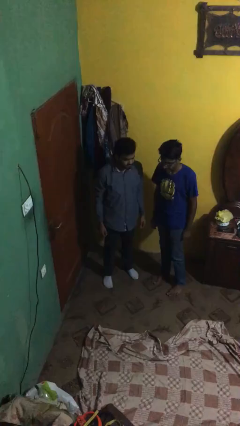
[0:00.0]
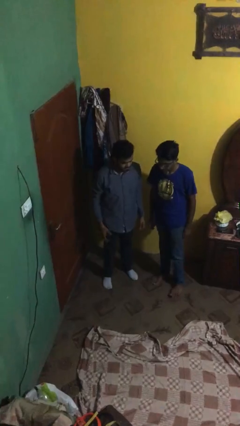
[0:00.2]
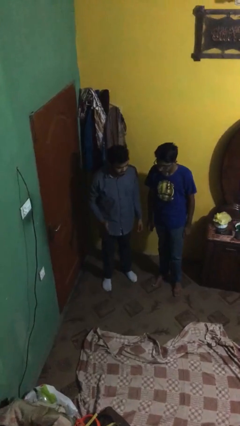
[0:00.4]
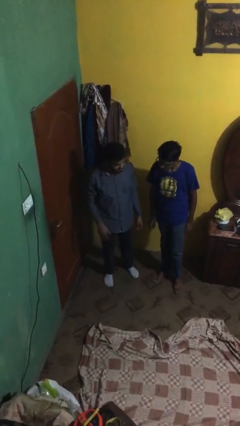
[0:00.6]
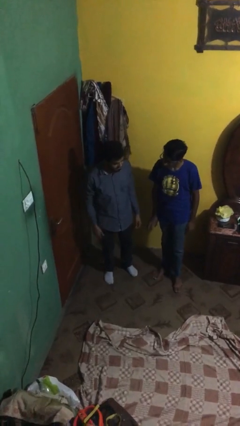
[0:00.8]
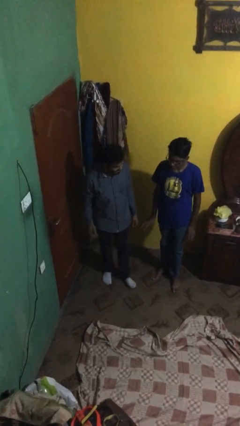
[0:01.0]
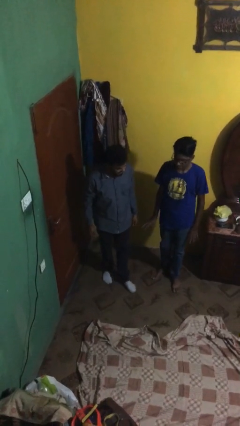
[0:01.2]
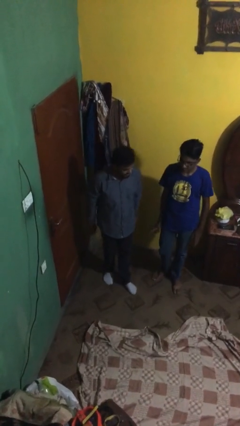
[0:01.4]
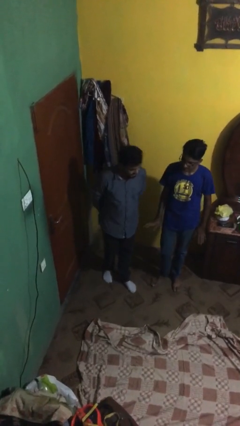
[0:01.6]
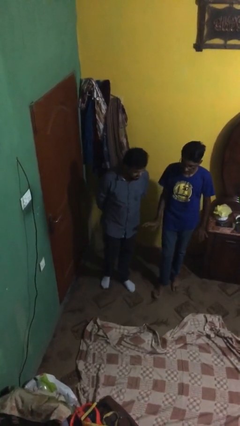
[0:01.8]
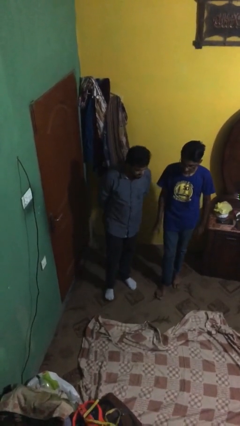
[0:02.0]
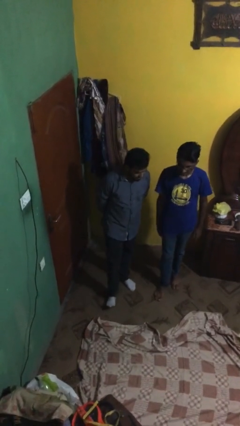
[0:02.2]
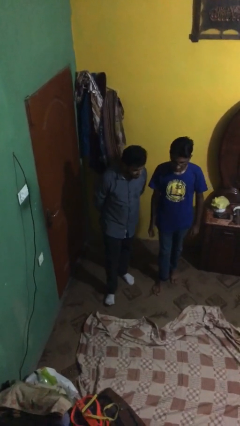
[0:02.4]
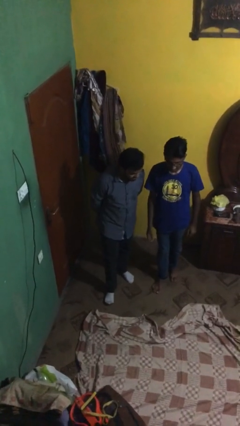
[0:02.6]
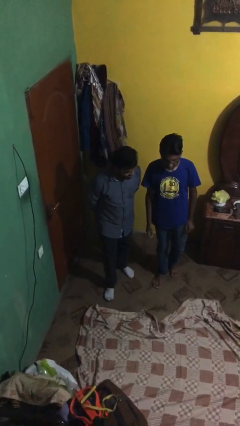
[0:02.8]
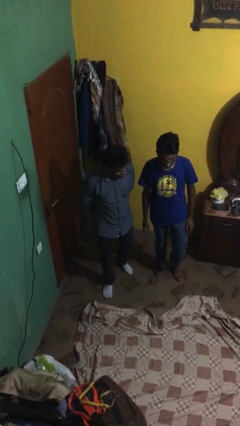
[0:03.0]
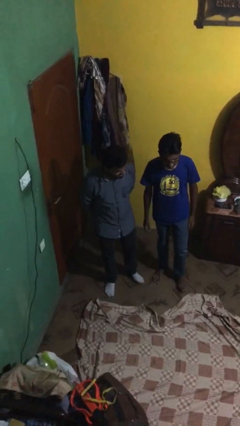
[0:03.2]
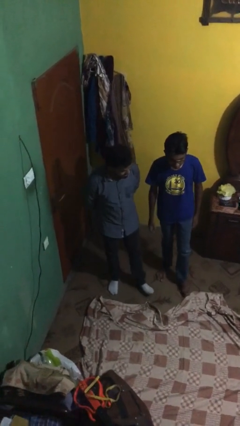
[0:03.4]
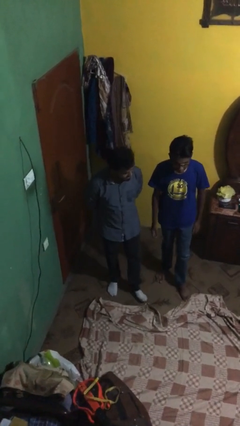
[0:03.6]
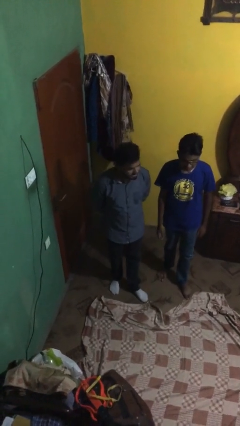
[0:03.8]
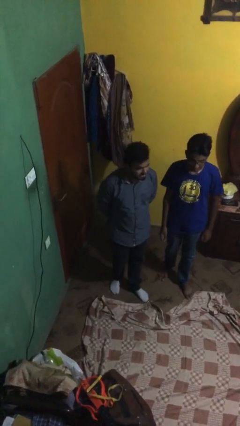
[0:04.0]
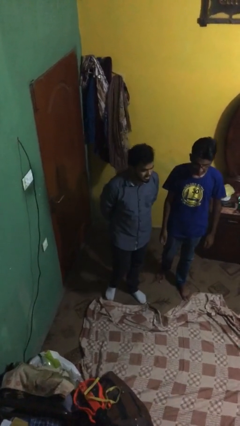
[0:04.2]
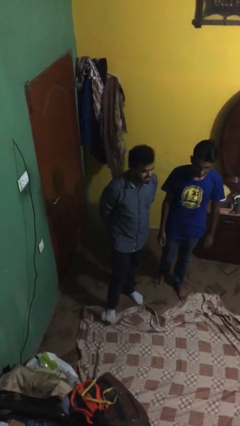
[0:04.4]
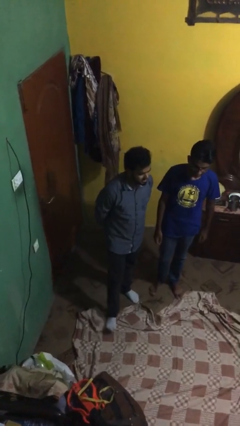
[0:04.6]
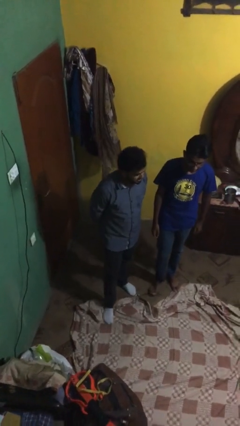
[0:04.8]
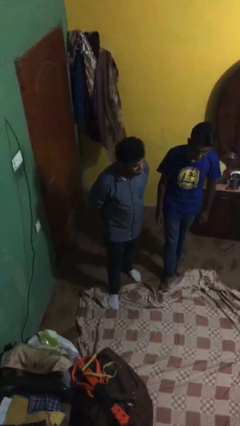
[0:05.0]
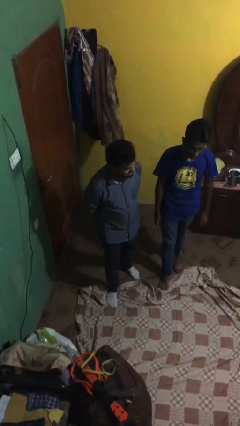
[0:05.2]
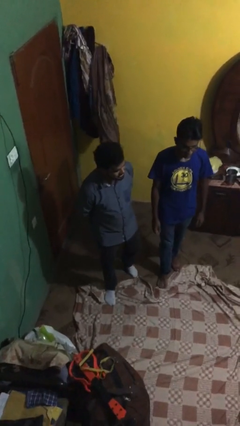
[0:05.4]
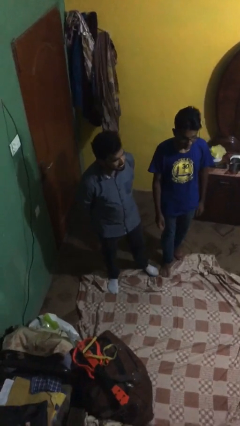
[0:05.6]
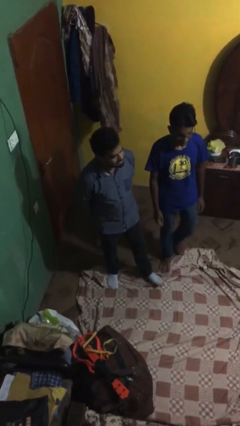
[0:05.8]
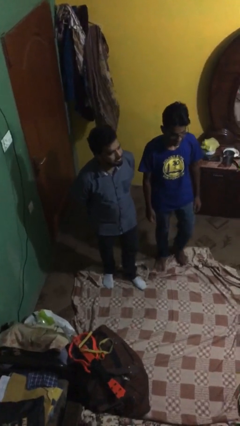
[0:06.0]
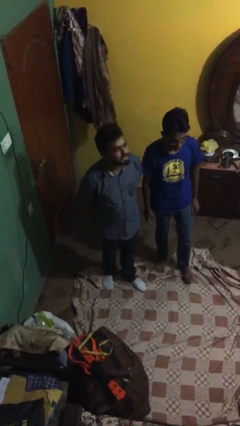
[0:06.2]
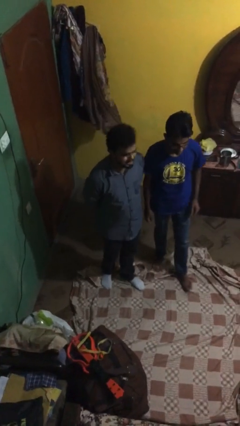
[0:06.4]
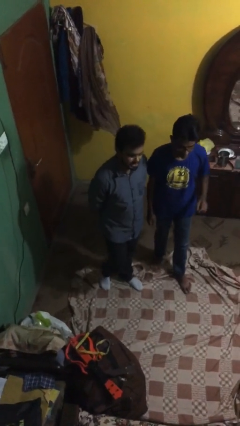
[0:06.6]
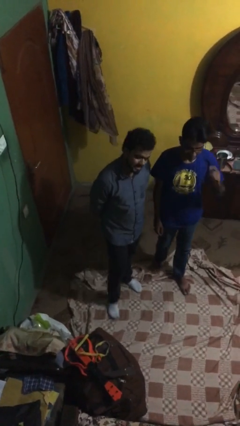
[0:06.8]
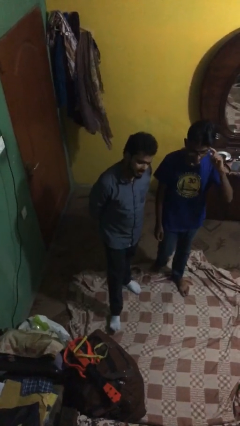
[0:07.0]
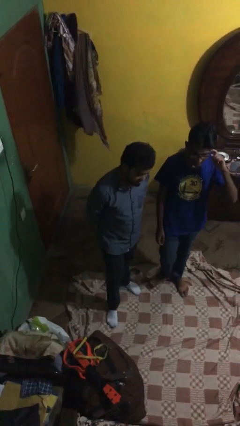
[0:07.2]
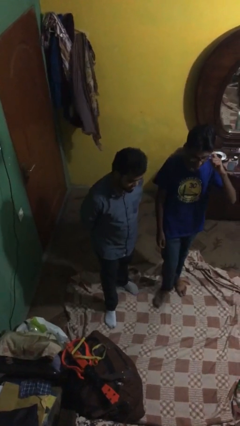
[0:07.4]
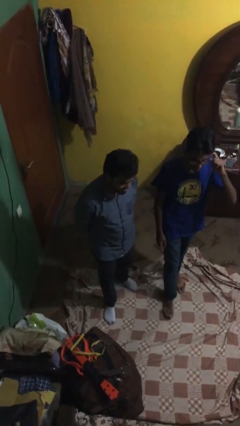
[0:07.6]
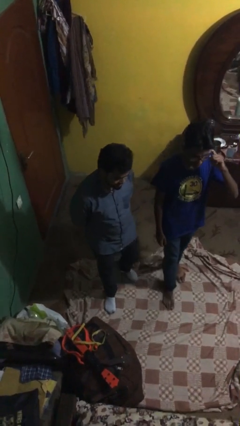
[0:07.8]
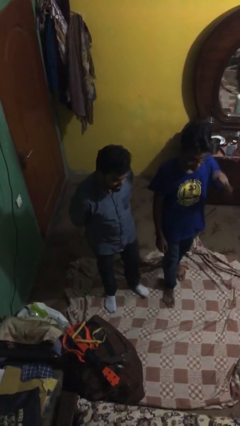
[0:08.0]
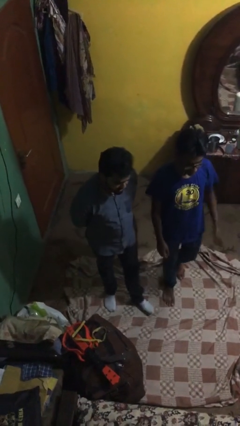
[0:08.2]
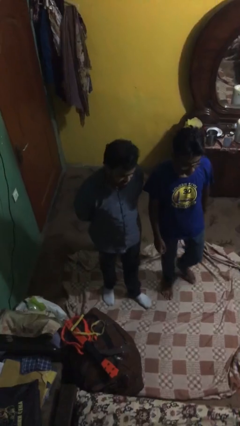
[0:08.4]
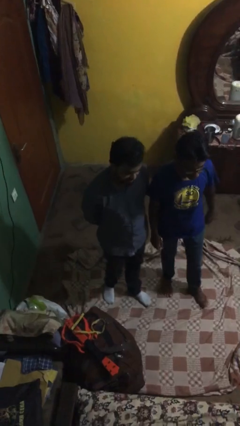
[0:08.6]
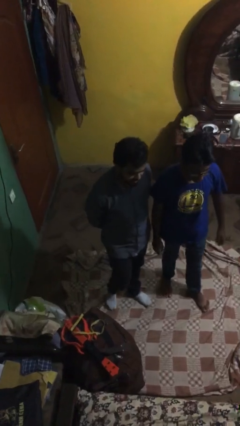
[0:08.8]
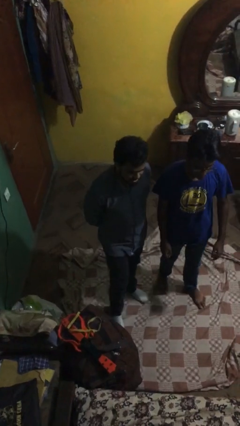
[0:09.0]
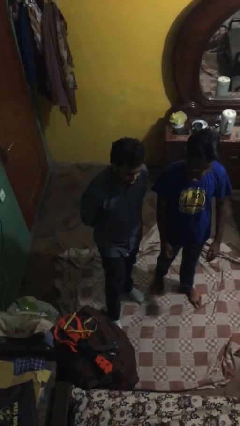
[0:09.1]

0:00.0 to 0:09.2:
person talks to person

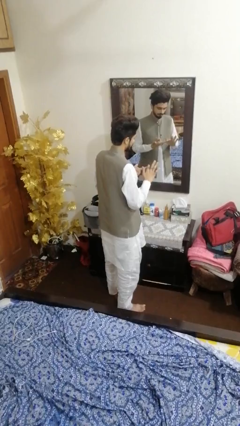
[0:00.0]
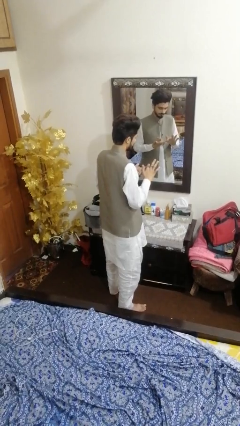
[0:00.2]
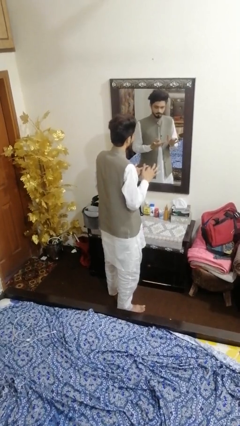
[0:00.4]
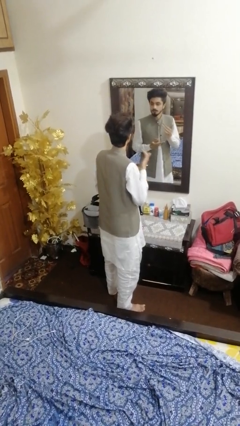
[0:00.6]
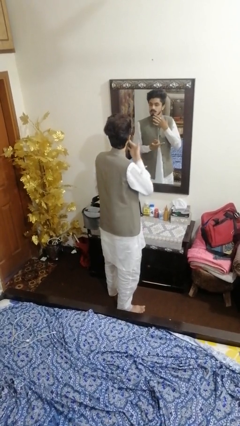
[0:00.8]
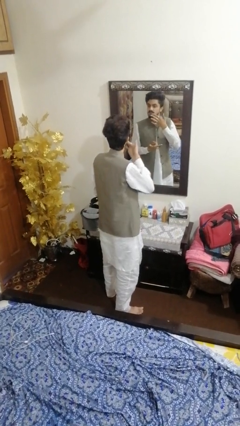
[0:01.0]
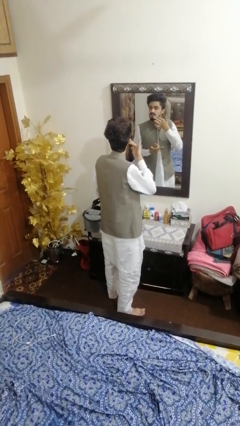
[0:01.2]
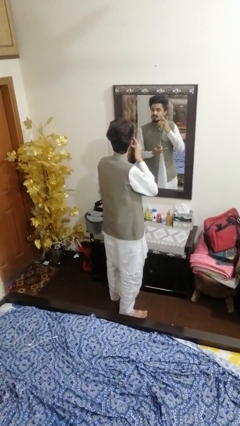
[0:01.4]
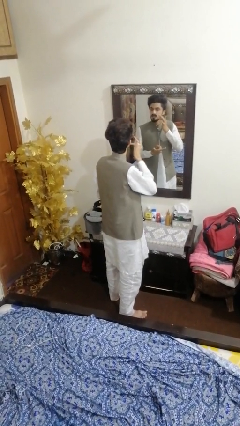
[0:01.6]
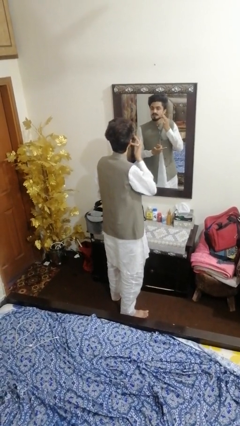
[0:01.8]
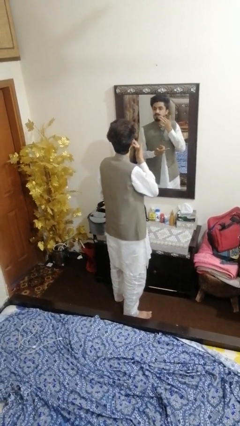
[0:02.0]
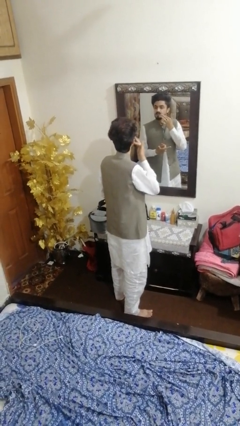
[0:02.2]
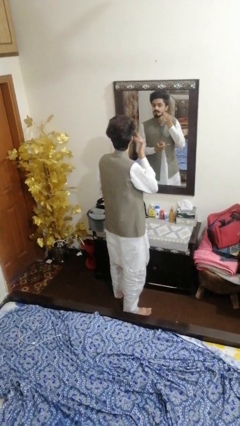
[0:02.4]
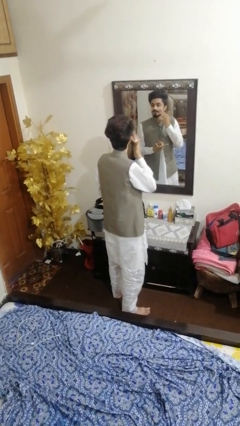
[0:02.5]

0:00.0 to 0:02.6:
person applies foundation makeup

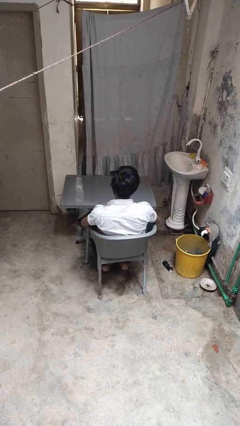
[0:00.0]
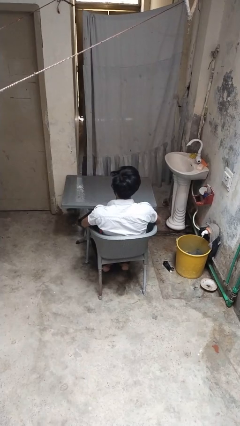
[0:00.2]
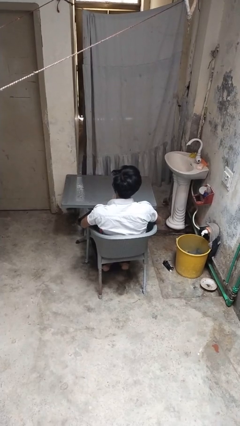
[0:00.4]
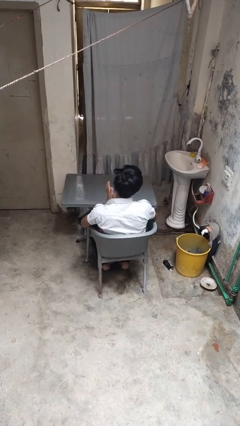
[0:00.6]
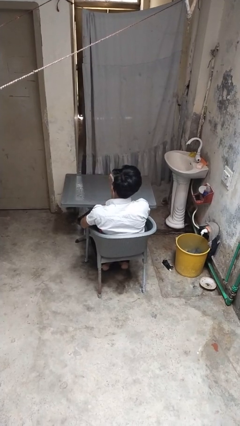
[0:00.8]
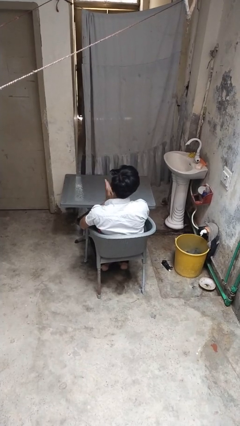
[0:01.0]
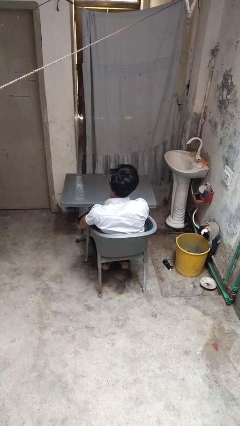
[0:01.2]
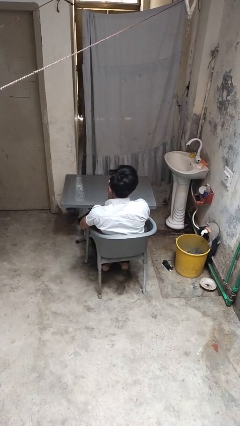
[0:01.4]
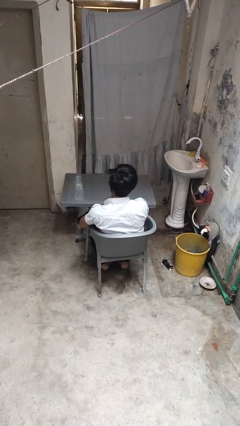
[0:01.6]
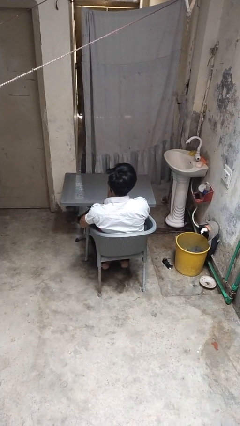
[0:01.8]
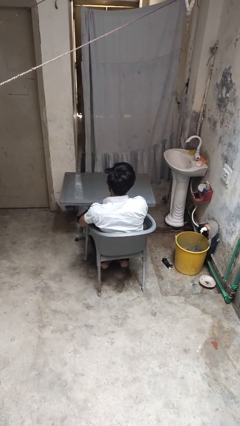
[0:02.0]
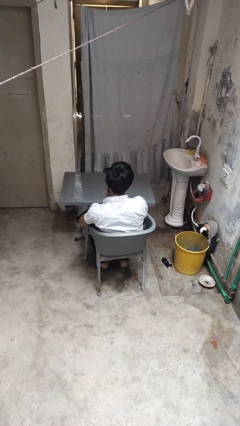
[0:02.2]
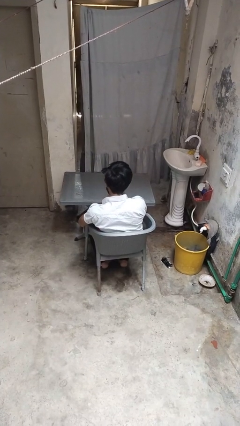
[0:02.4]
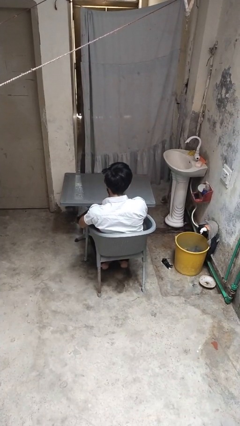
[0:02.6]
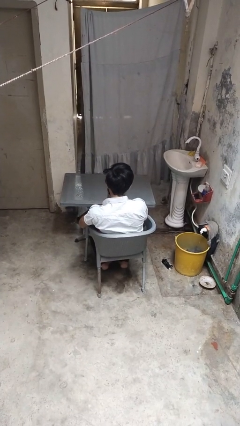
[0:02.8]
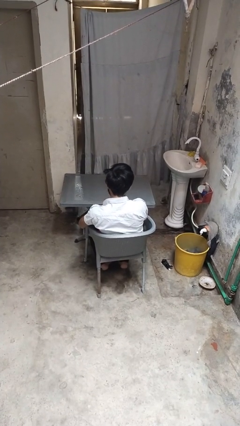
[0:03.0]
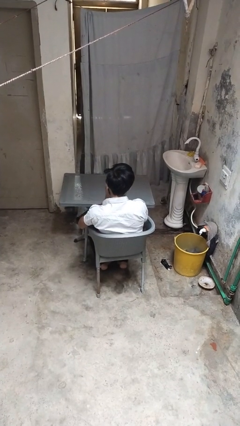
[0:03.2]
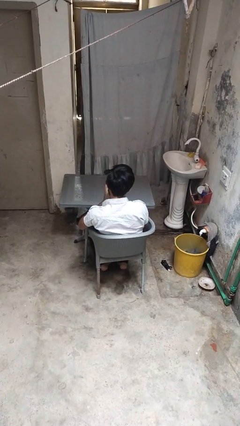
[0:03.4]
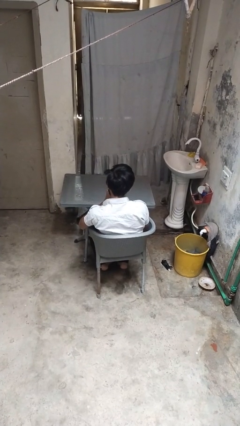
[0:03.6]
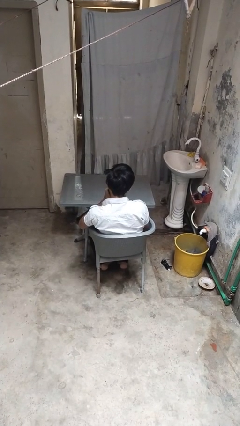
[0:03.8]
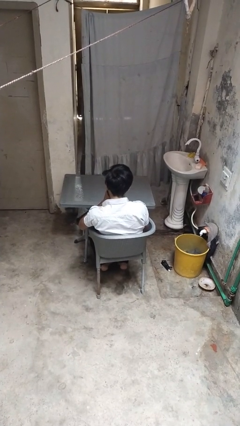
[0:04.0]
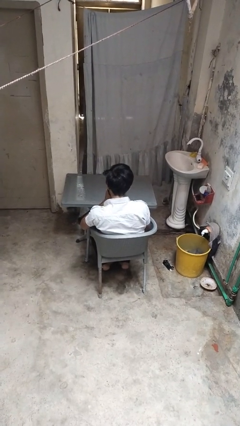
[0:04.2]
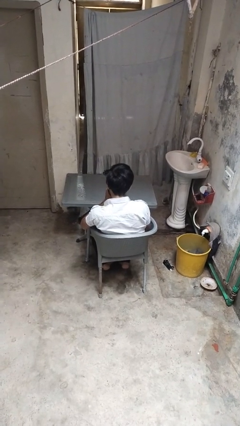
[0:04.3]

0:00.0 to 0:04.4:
person blows into hands

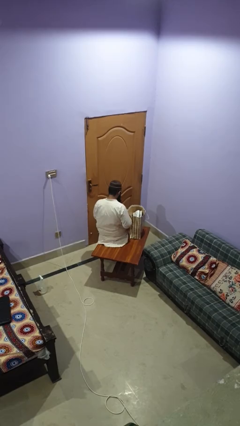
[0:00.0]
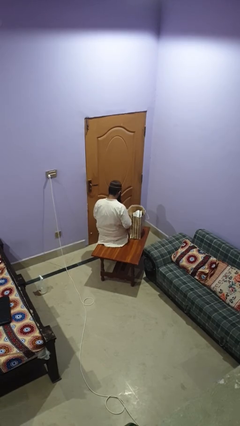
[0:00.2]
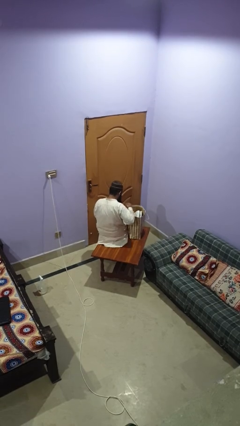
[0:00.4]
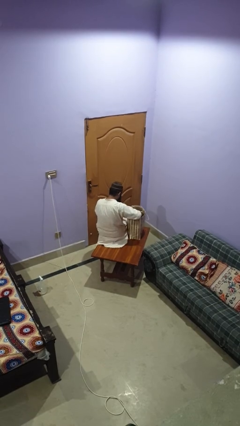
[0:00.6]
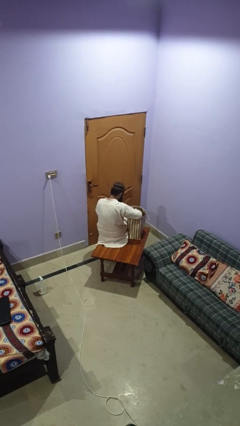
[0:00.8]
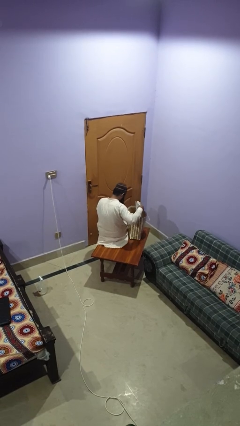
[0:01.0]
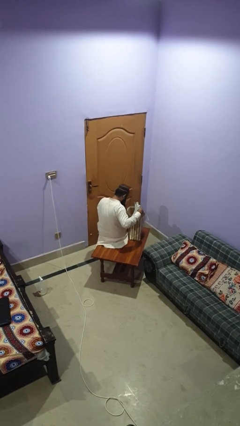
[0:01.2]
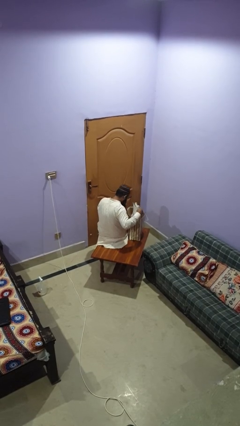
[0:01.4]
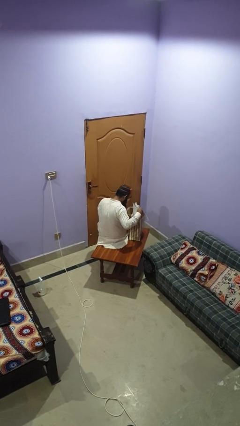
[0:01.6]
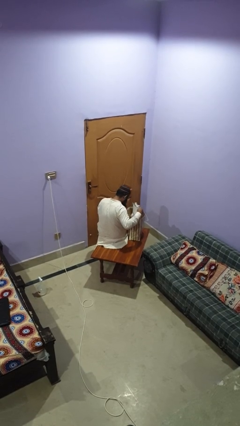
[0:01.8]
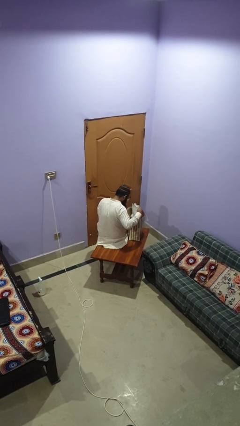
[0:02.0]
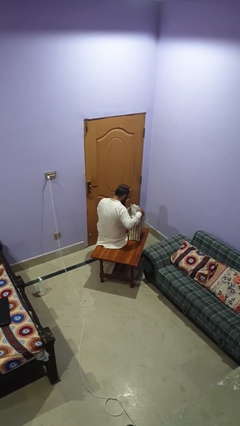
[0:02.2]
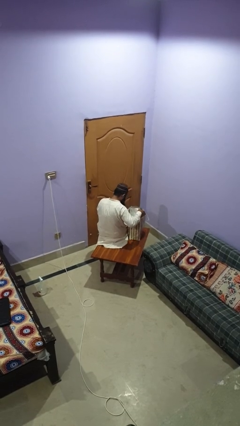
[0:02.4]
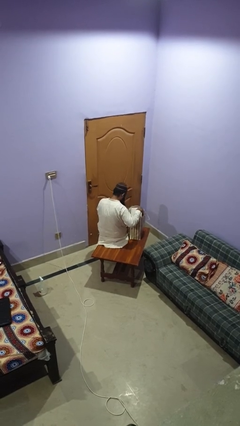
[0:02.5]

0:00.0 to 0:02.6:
person searches in bag
